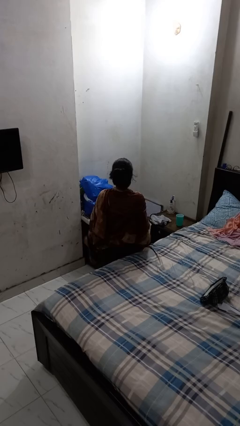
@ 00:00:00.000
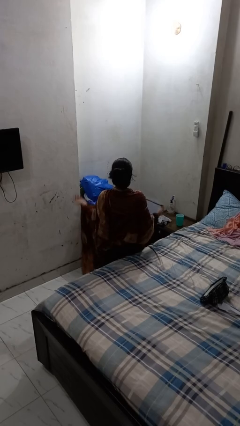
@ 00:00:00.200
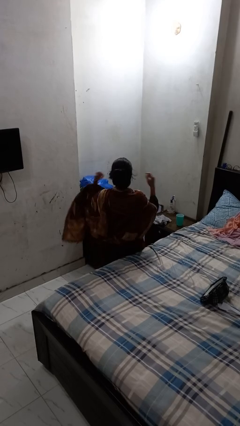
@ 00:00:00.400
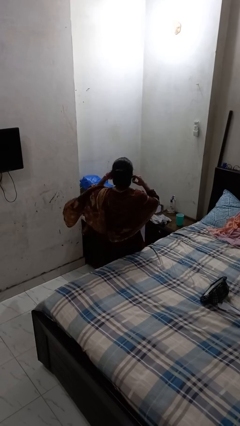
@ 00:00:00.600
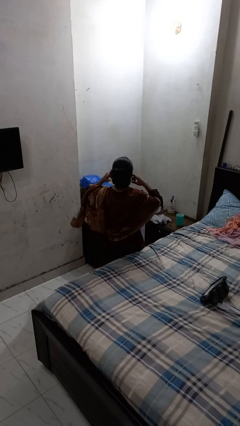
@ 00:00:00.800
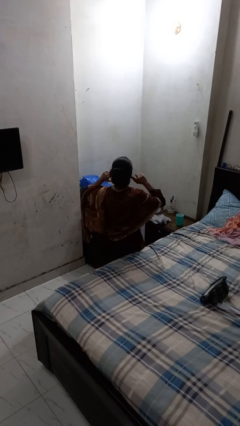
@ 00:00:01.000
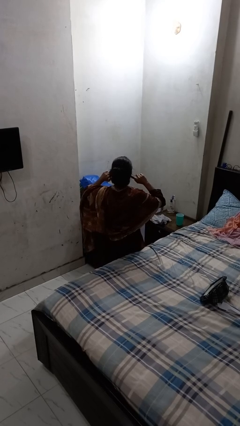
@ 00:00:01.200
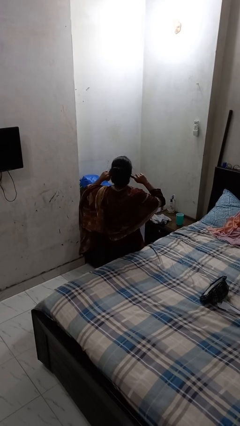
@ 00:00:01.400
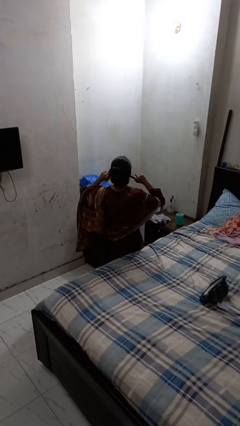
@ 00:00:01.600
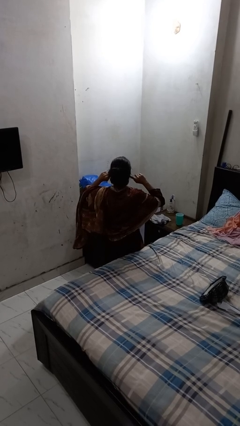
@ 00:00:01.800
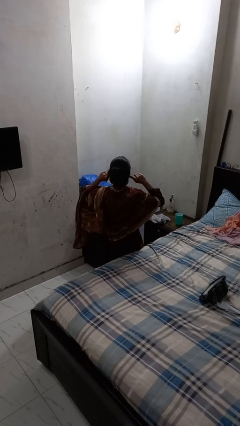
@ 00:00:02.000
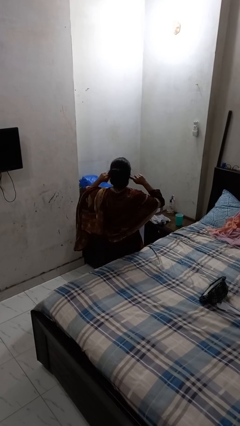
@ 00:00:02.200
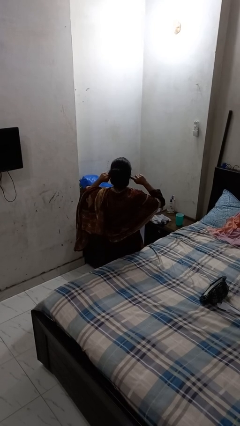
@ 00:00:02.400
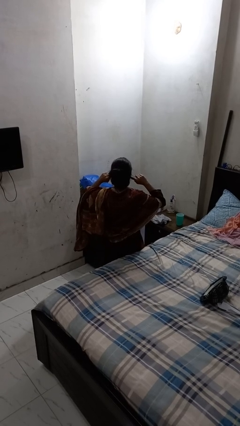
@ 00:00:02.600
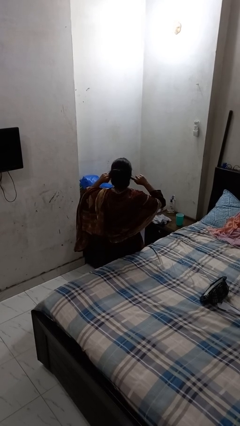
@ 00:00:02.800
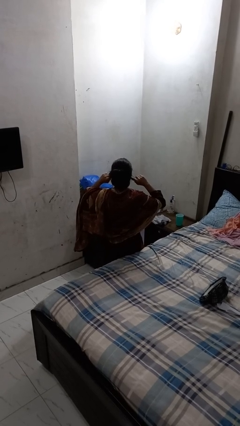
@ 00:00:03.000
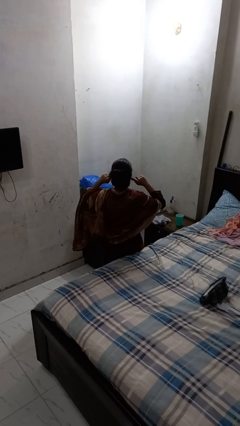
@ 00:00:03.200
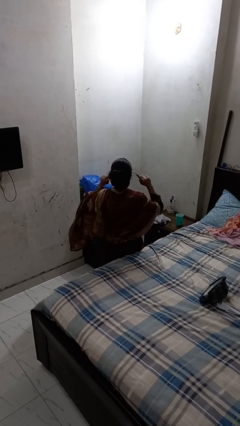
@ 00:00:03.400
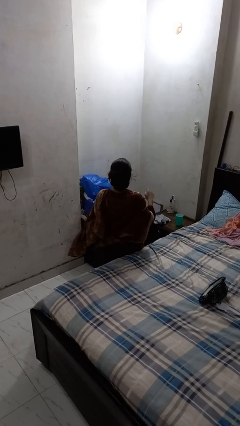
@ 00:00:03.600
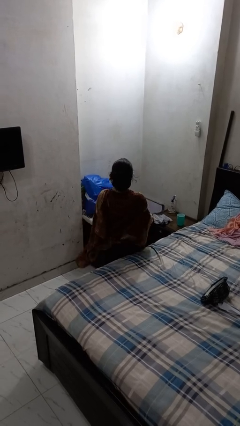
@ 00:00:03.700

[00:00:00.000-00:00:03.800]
person puts fingers in ear

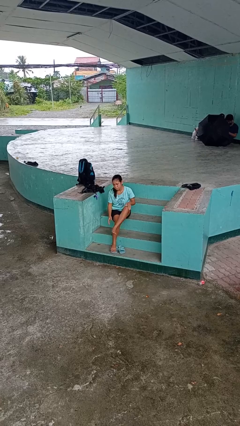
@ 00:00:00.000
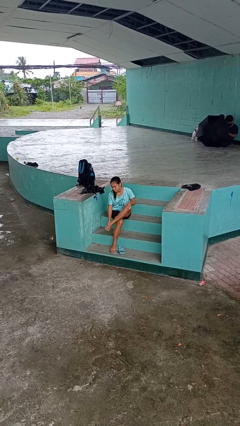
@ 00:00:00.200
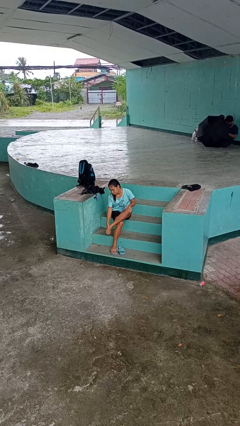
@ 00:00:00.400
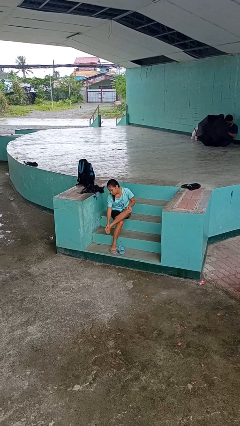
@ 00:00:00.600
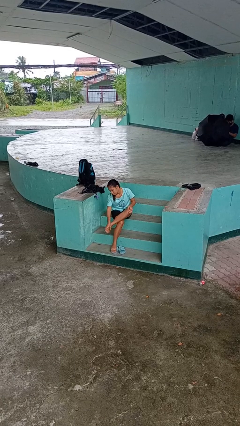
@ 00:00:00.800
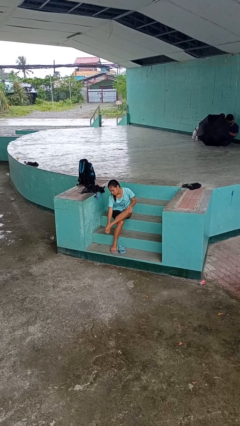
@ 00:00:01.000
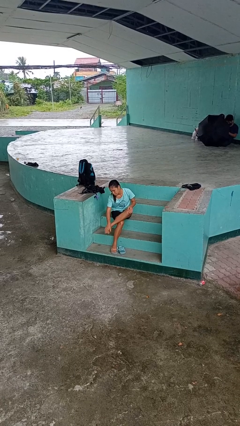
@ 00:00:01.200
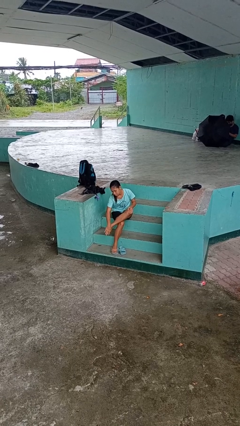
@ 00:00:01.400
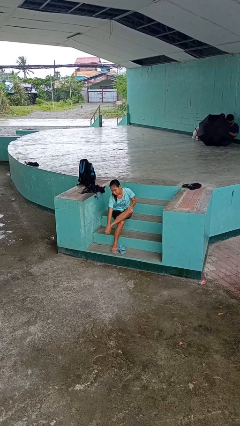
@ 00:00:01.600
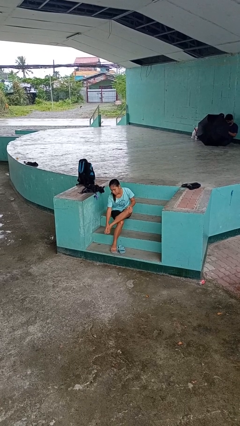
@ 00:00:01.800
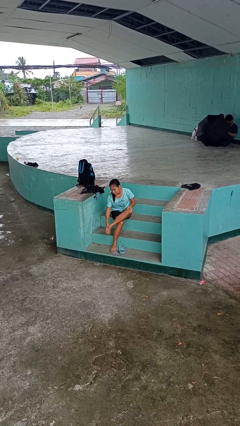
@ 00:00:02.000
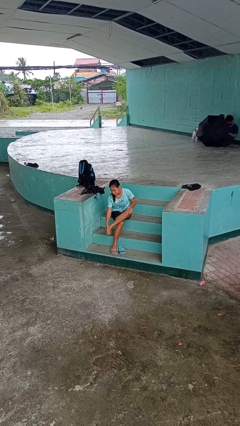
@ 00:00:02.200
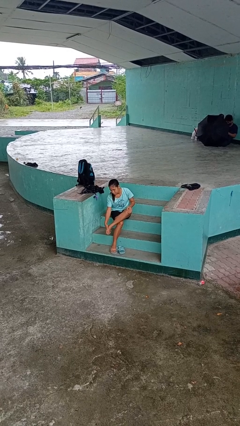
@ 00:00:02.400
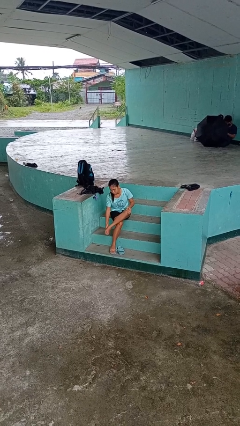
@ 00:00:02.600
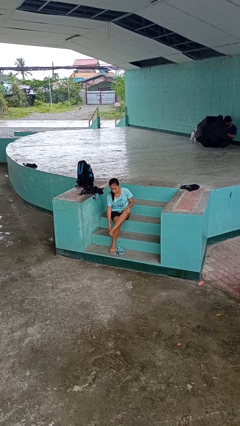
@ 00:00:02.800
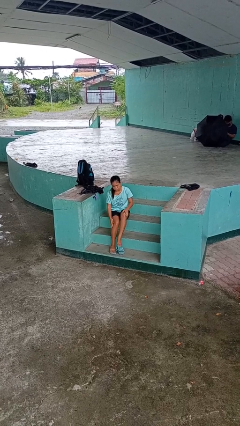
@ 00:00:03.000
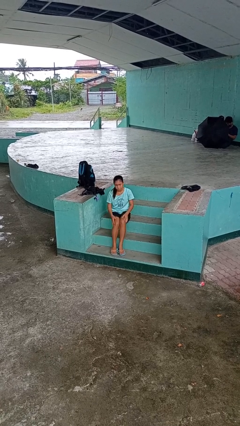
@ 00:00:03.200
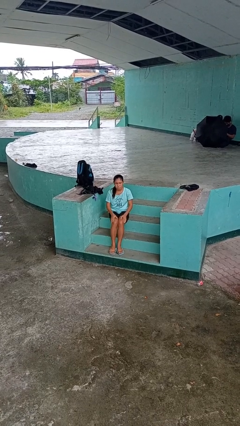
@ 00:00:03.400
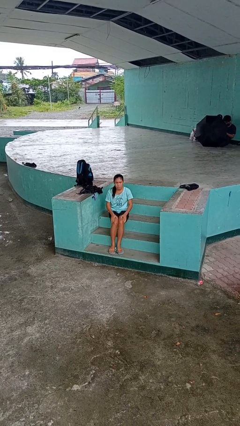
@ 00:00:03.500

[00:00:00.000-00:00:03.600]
person rubs foot

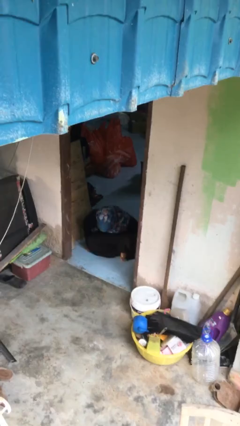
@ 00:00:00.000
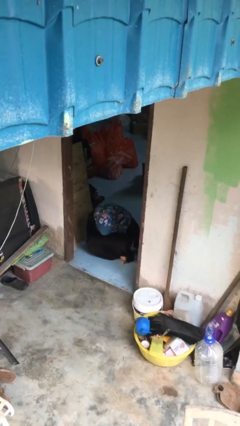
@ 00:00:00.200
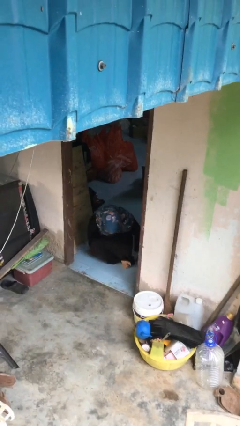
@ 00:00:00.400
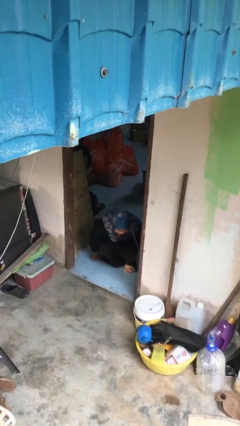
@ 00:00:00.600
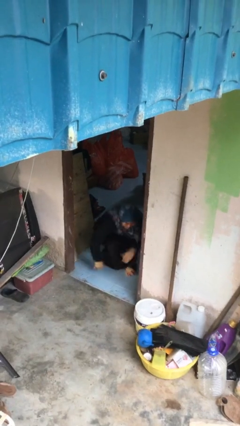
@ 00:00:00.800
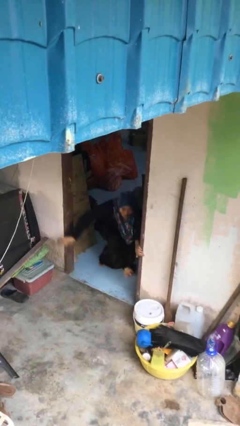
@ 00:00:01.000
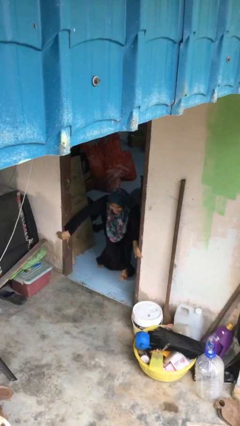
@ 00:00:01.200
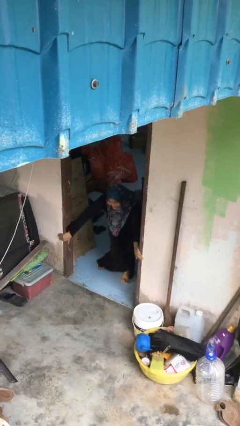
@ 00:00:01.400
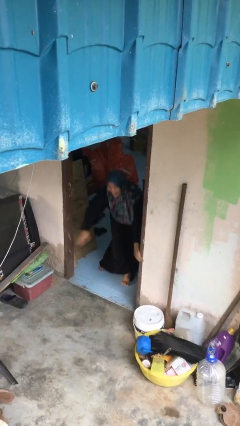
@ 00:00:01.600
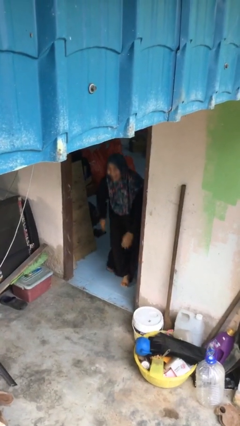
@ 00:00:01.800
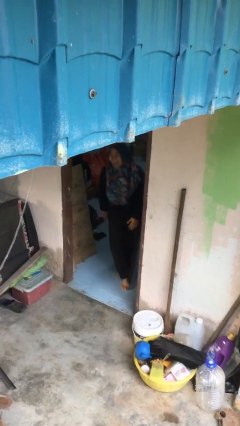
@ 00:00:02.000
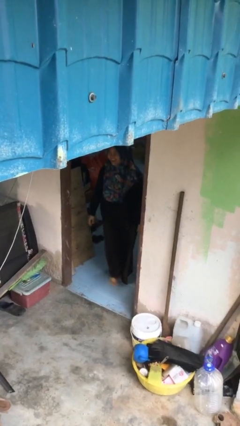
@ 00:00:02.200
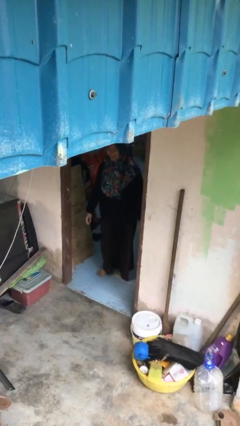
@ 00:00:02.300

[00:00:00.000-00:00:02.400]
person stands up

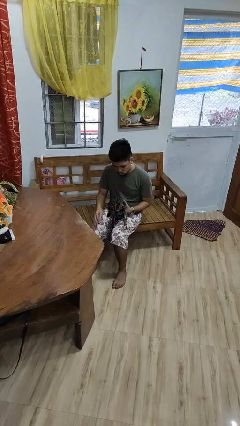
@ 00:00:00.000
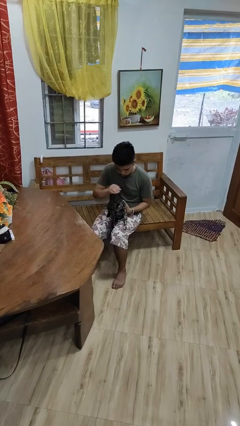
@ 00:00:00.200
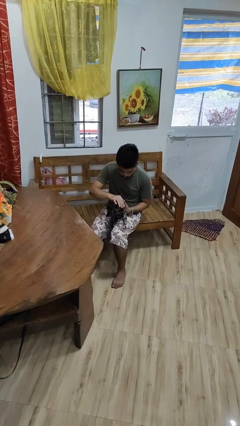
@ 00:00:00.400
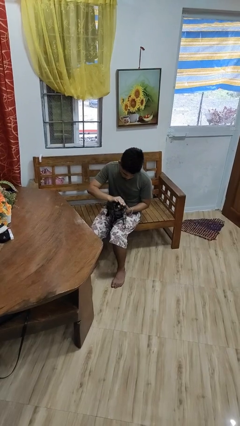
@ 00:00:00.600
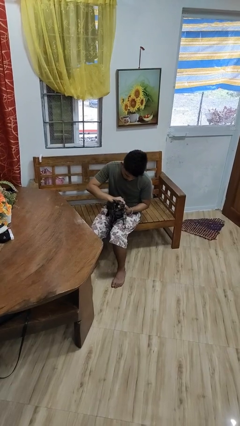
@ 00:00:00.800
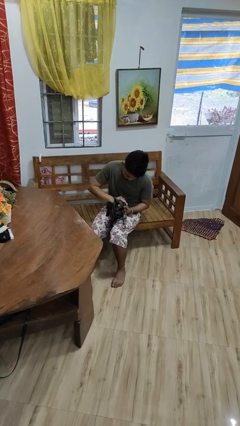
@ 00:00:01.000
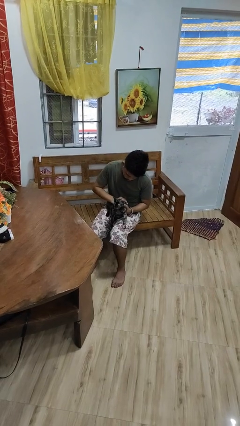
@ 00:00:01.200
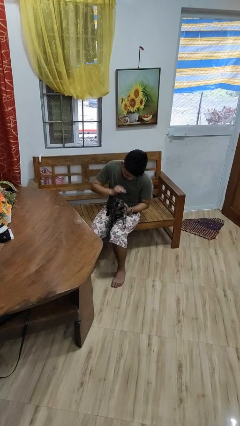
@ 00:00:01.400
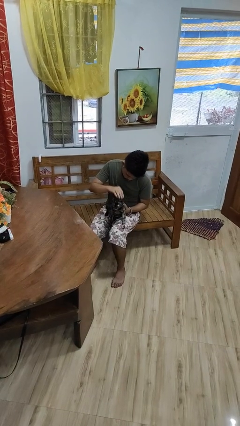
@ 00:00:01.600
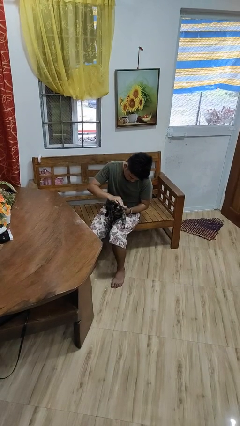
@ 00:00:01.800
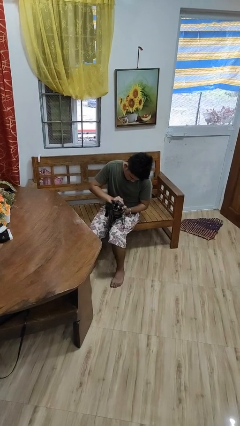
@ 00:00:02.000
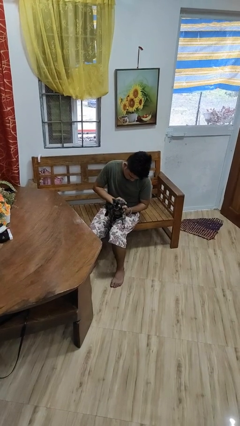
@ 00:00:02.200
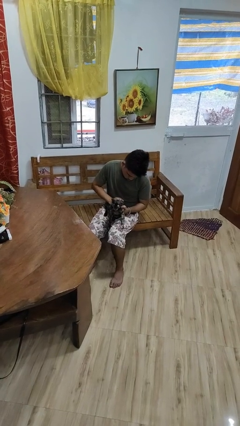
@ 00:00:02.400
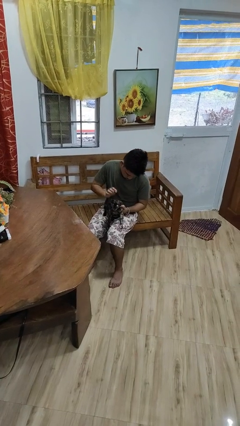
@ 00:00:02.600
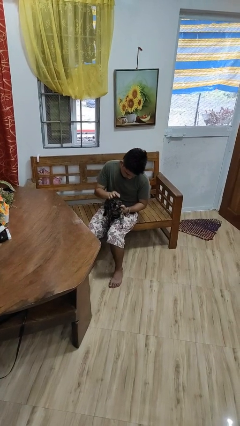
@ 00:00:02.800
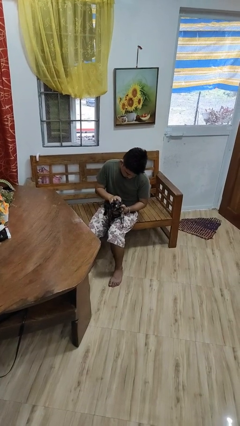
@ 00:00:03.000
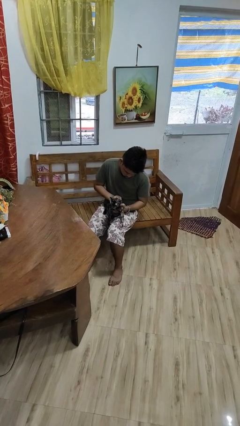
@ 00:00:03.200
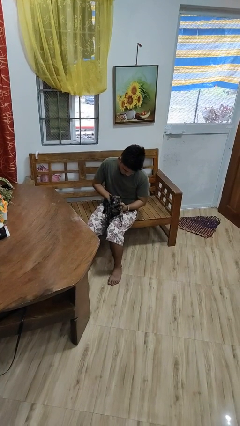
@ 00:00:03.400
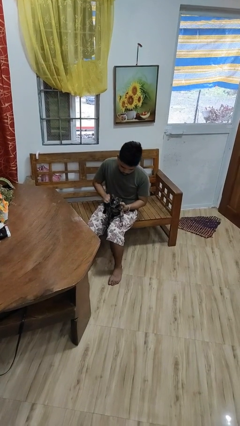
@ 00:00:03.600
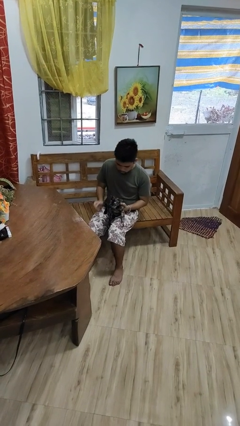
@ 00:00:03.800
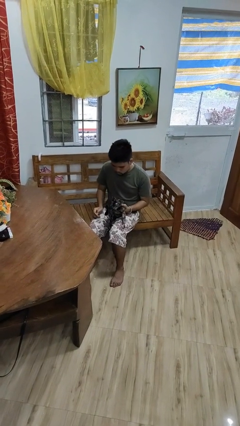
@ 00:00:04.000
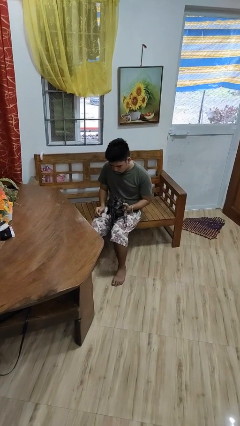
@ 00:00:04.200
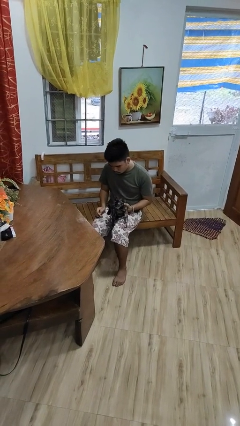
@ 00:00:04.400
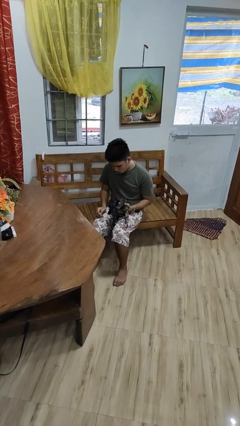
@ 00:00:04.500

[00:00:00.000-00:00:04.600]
person pets cat

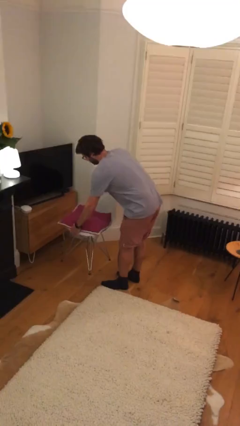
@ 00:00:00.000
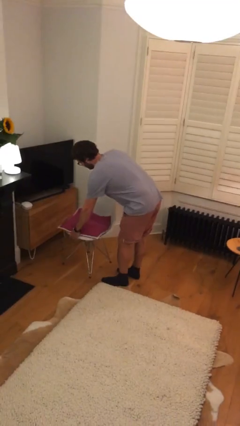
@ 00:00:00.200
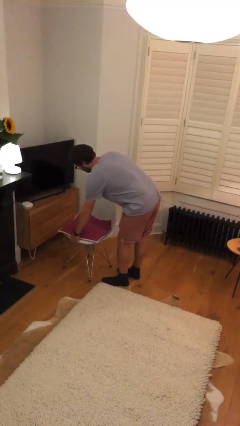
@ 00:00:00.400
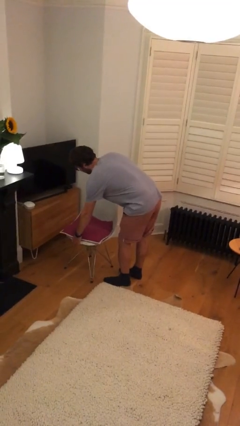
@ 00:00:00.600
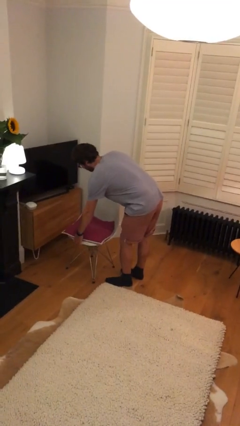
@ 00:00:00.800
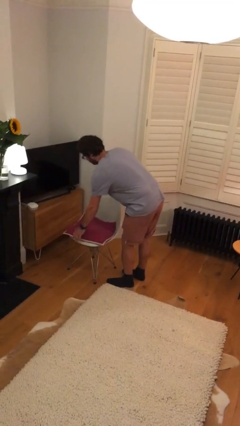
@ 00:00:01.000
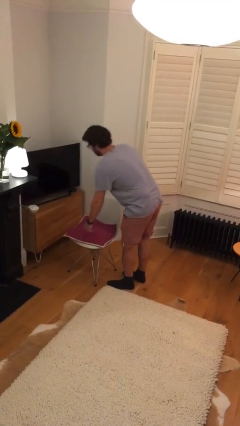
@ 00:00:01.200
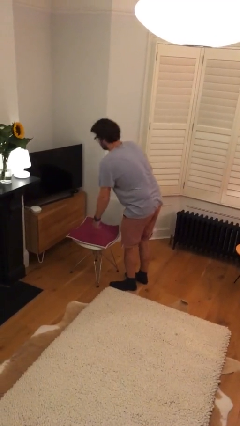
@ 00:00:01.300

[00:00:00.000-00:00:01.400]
person puts down object on floor

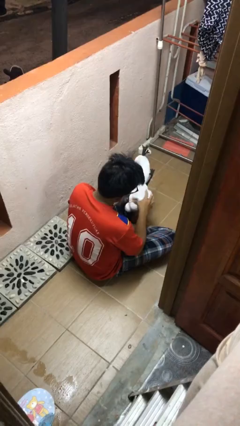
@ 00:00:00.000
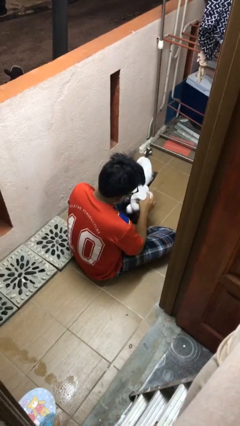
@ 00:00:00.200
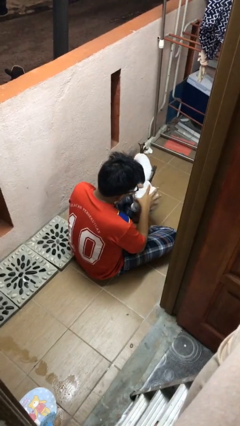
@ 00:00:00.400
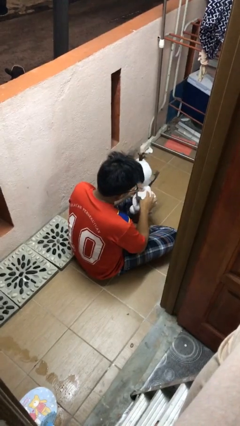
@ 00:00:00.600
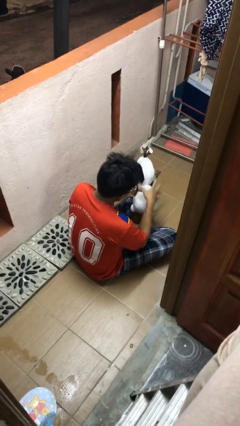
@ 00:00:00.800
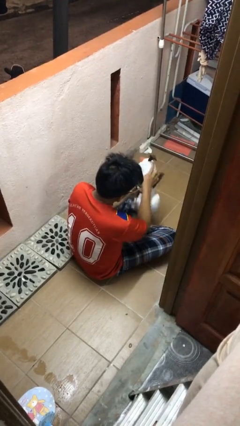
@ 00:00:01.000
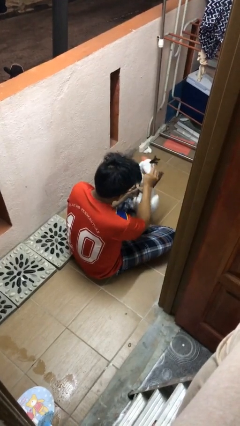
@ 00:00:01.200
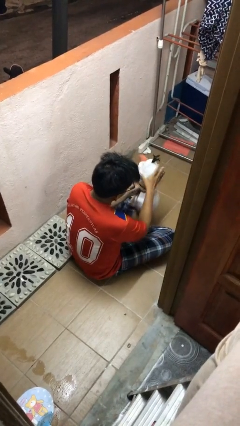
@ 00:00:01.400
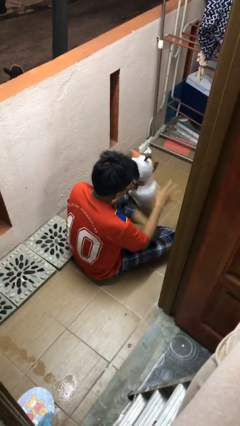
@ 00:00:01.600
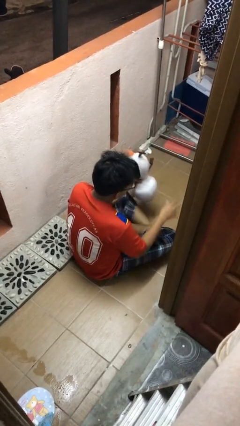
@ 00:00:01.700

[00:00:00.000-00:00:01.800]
person squeezes object
